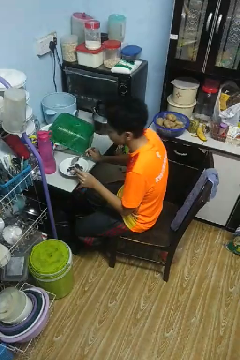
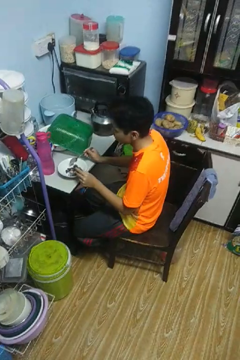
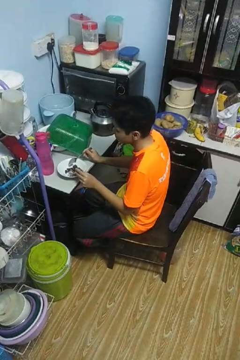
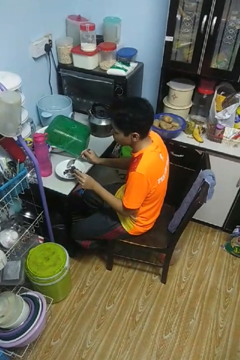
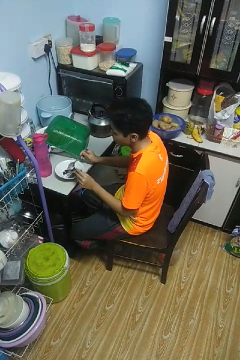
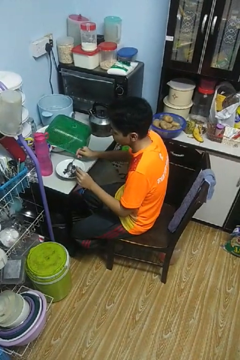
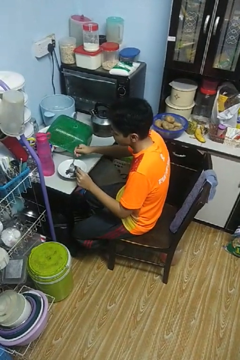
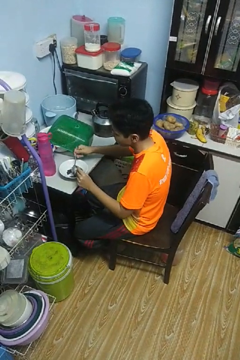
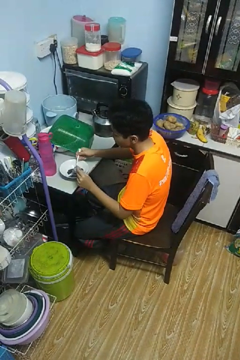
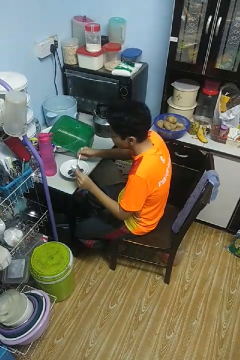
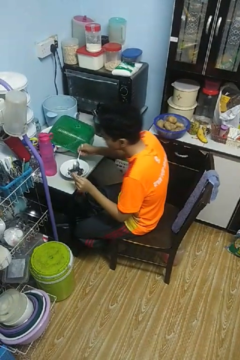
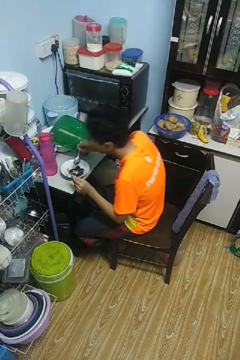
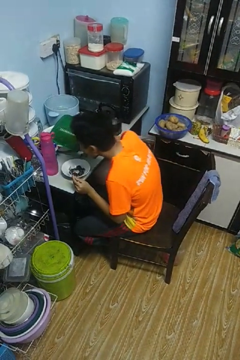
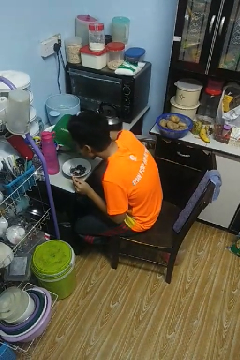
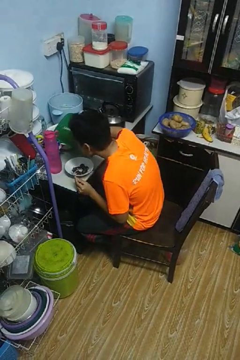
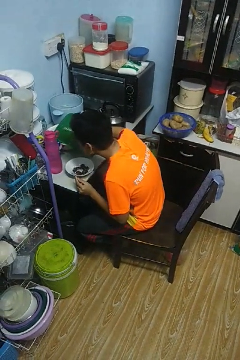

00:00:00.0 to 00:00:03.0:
person eats with utensil

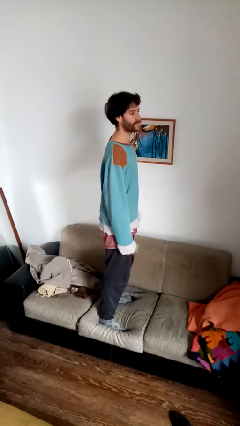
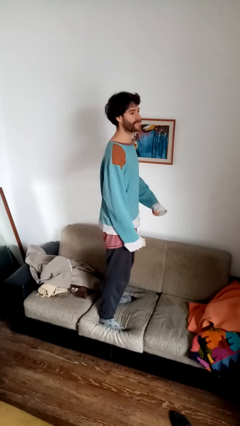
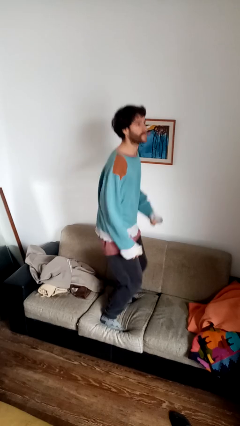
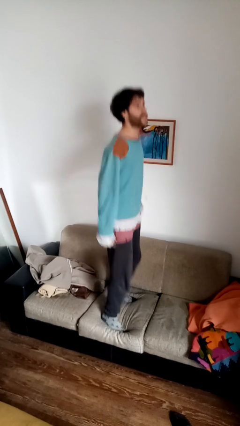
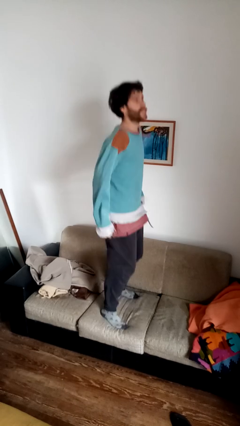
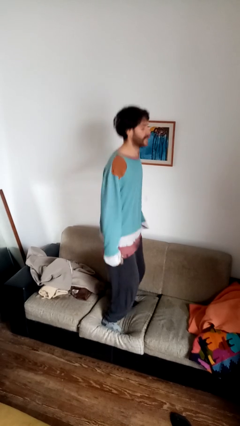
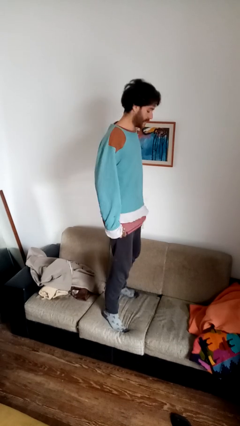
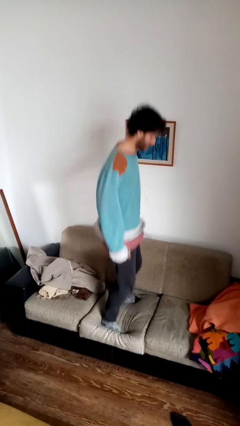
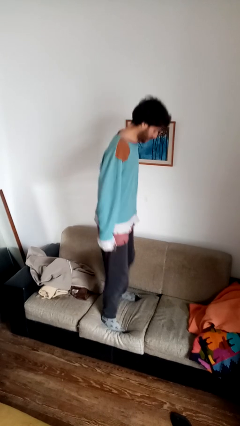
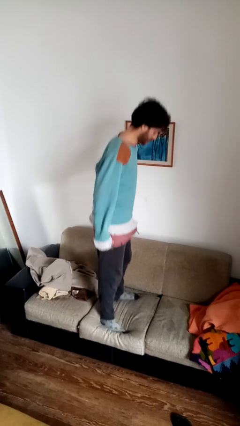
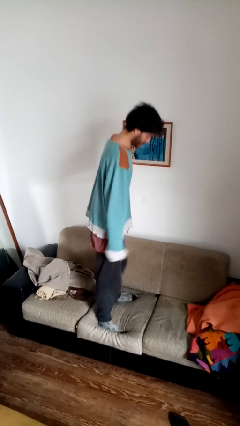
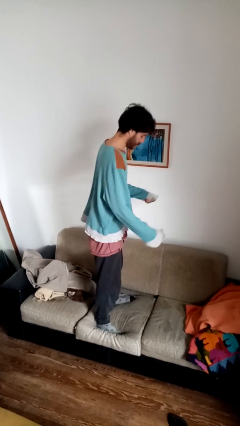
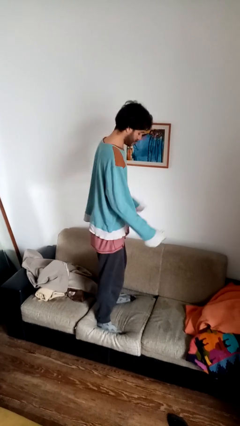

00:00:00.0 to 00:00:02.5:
person jumps on couch

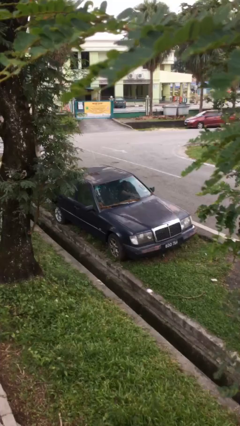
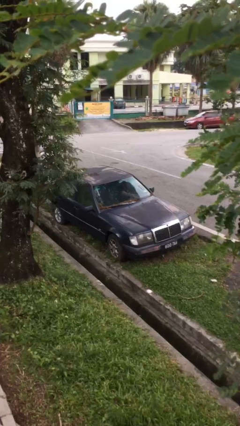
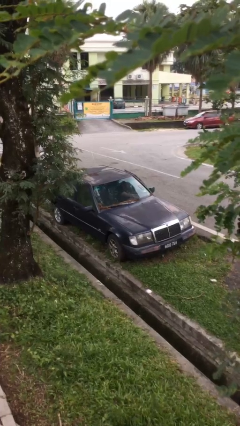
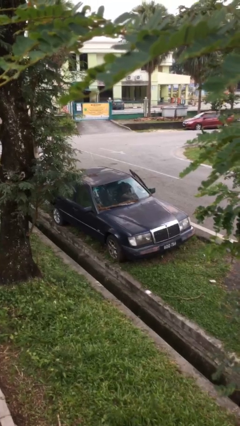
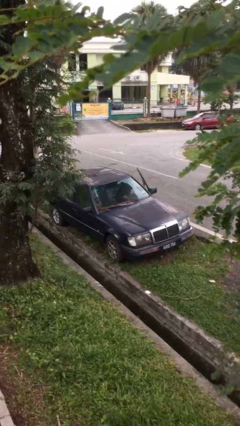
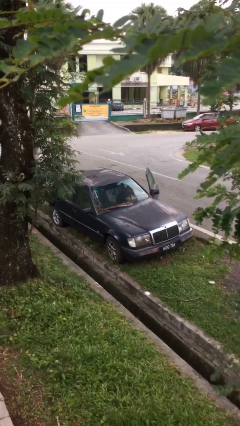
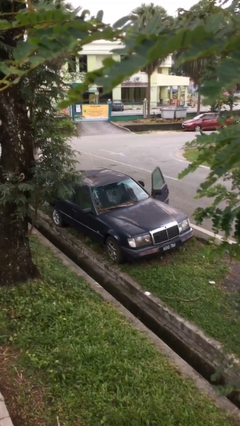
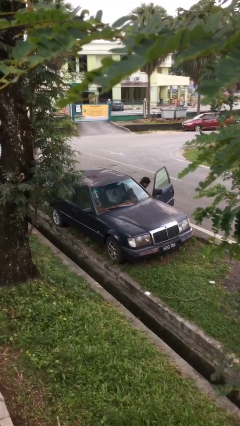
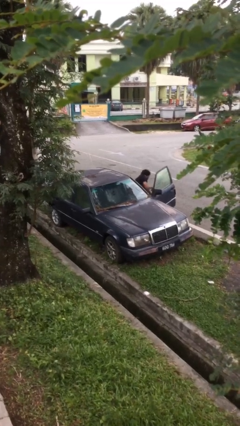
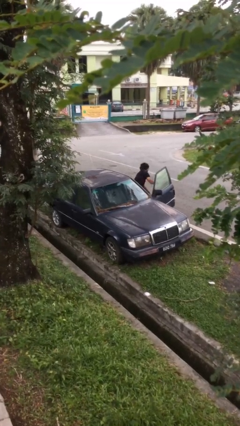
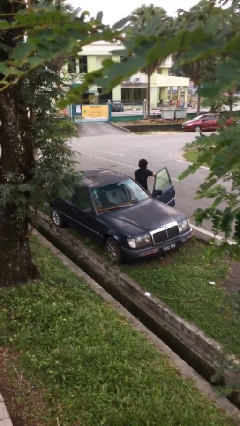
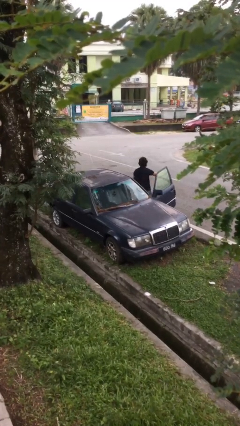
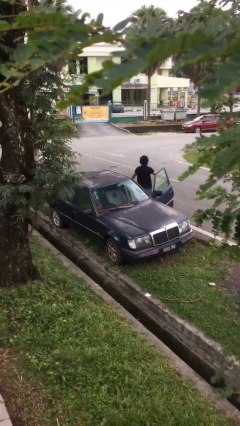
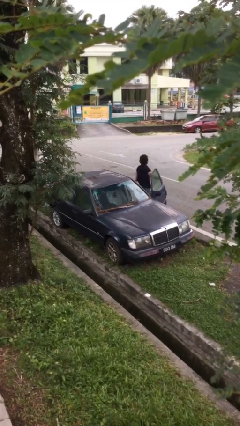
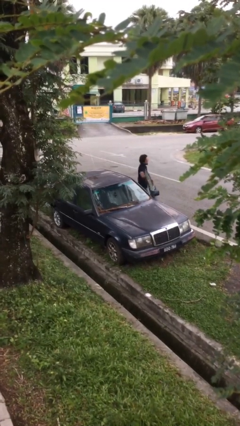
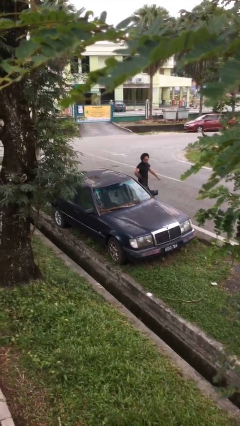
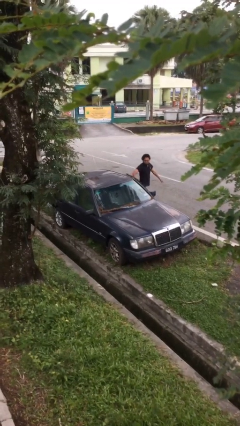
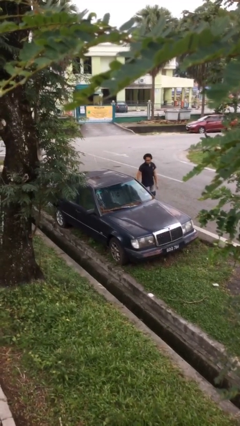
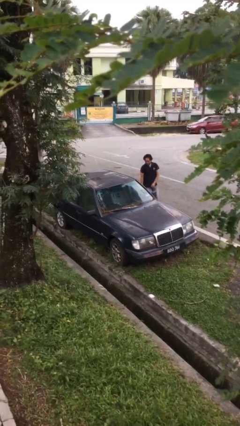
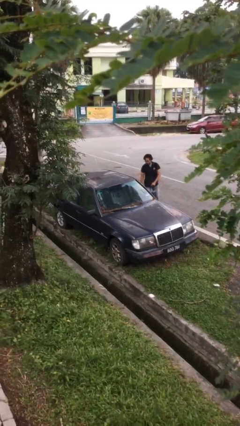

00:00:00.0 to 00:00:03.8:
car drops off person

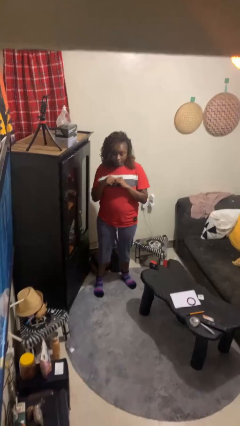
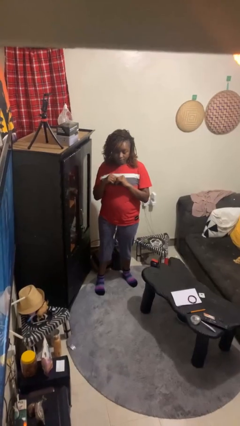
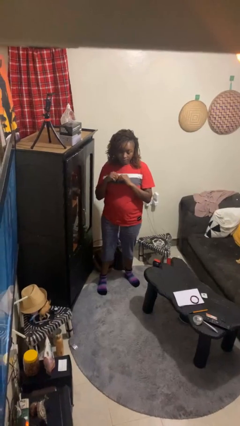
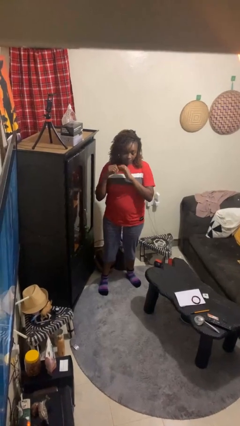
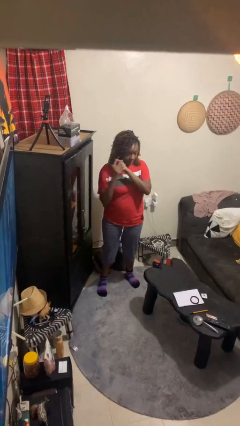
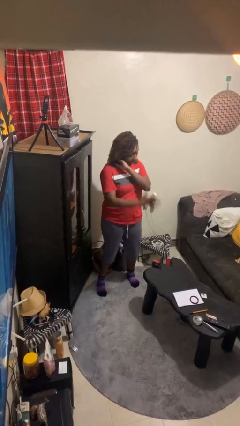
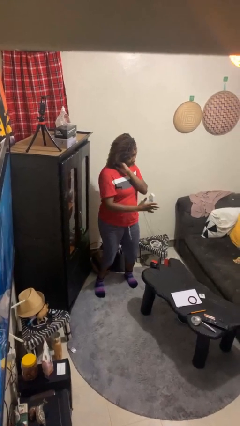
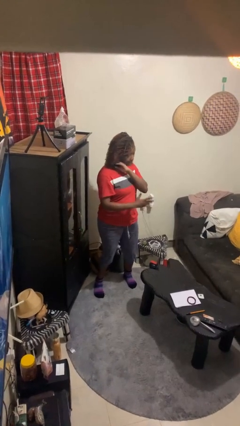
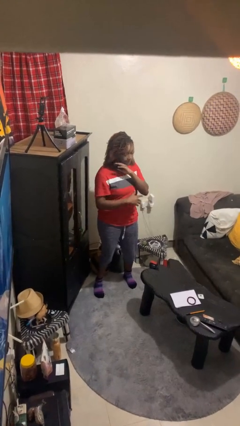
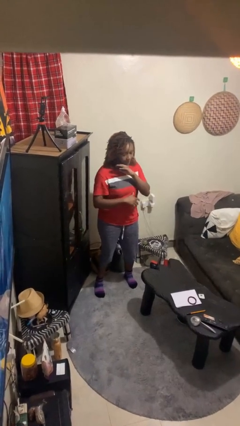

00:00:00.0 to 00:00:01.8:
person karate chop

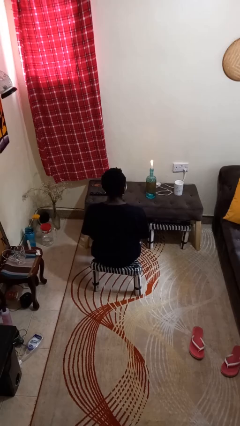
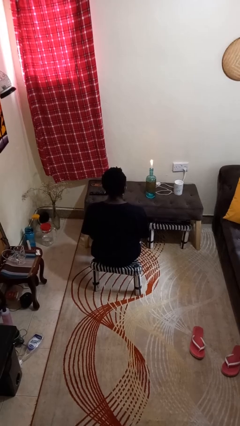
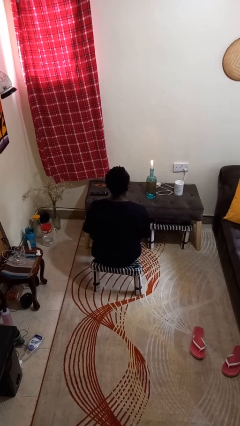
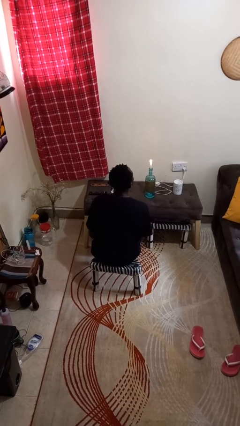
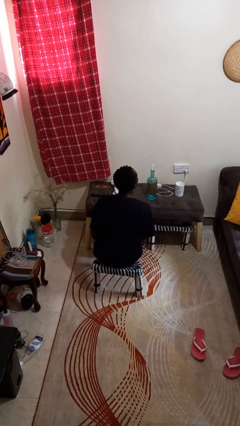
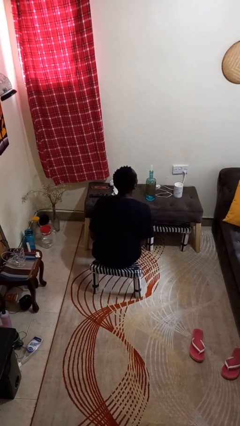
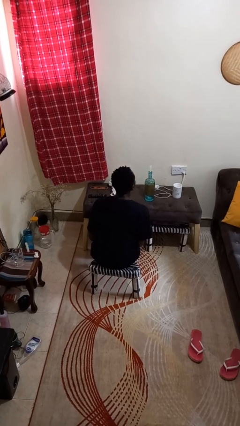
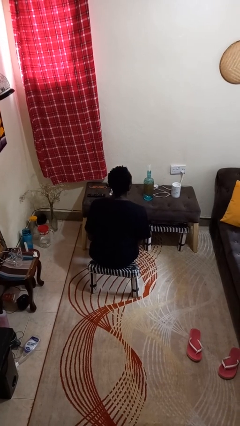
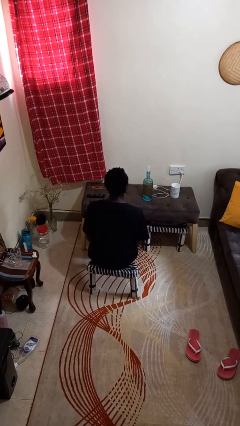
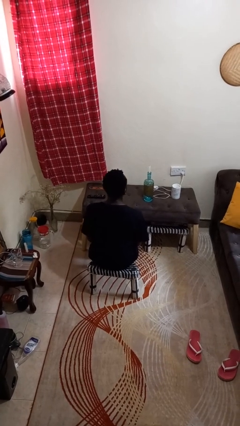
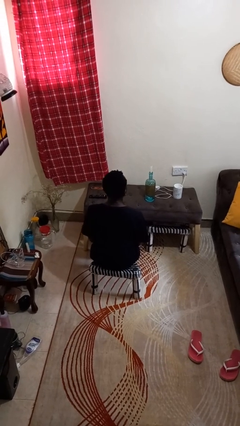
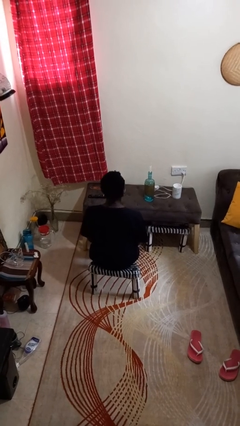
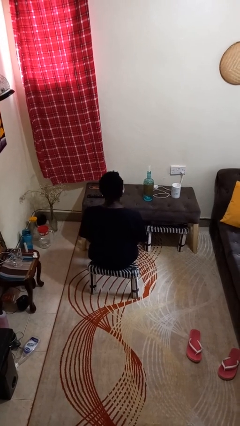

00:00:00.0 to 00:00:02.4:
person extinguishes candle

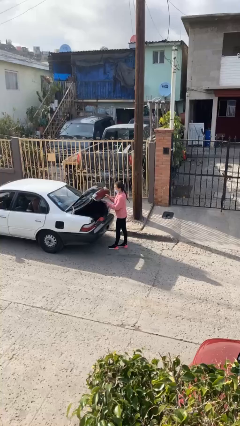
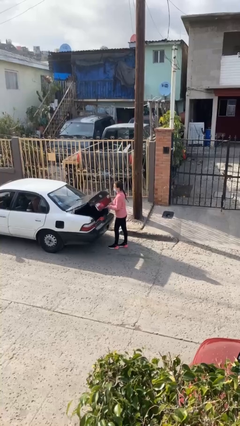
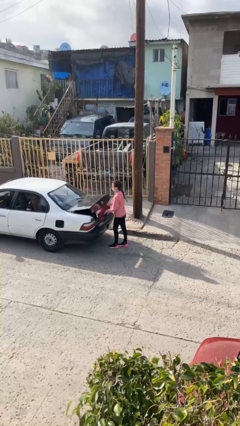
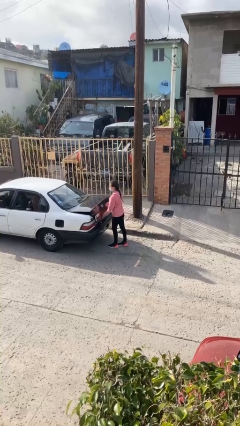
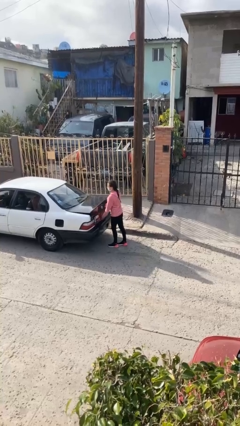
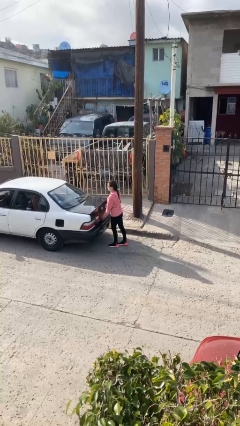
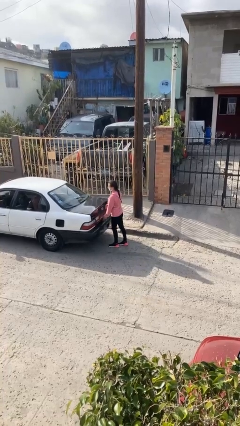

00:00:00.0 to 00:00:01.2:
person closes car trunk

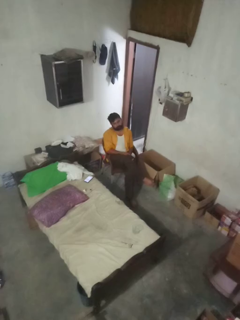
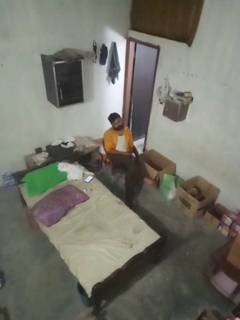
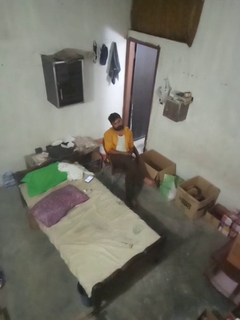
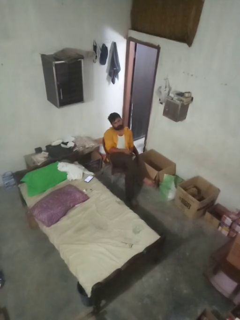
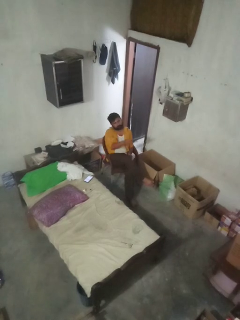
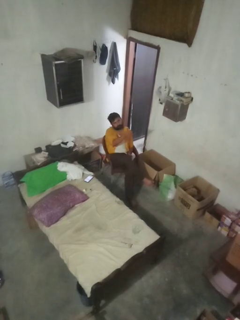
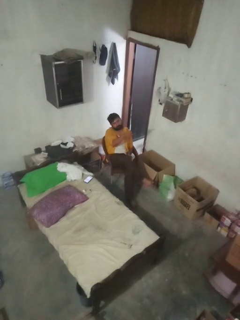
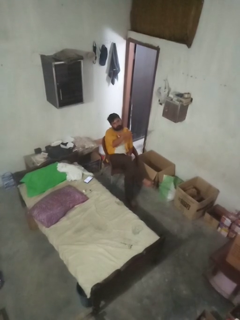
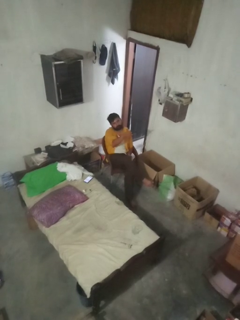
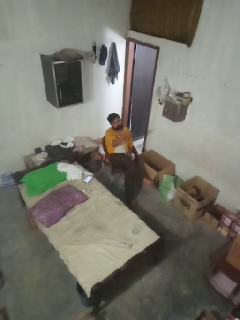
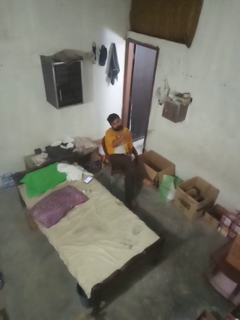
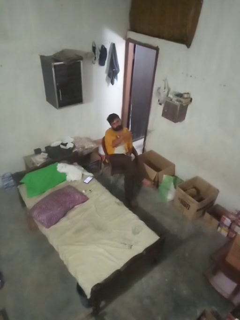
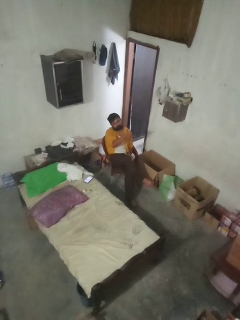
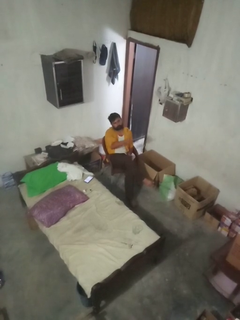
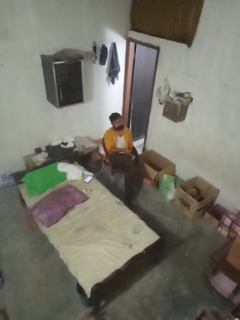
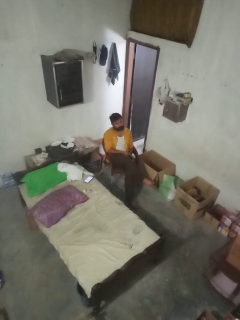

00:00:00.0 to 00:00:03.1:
person uses television remote

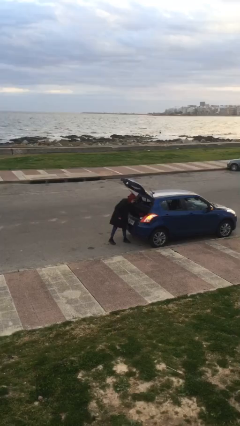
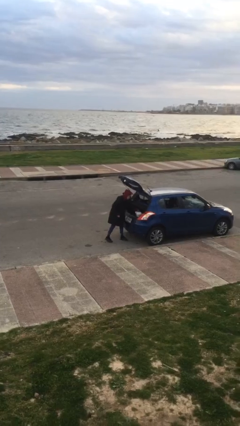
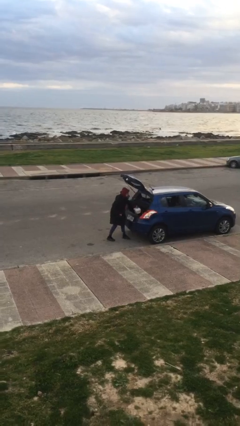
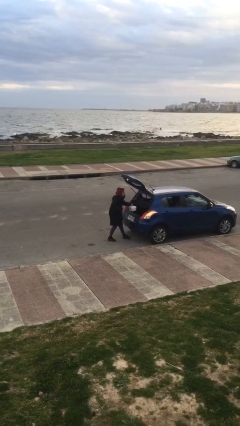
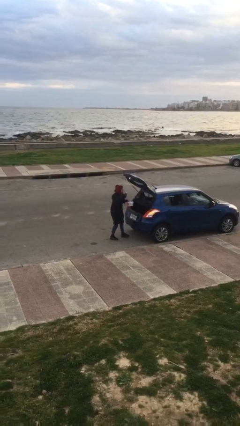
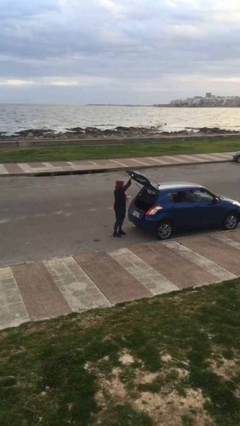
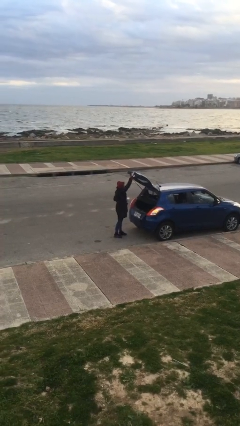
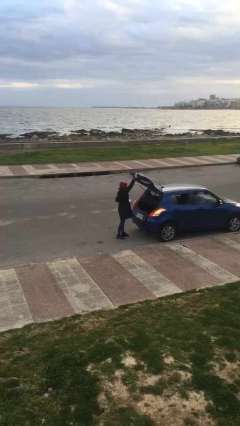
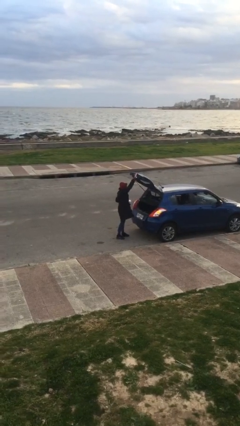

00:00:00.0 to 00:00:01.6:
person unloads car
